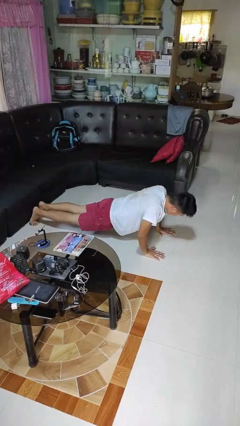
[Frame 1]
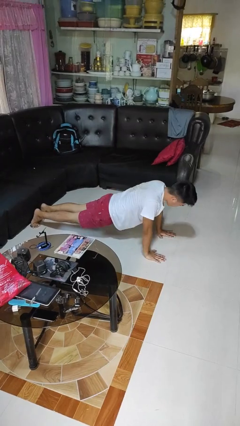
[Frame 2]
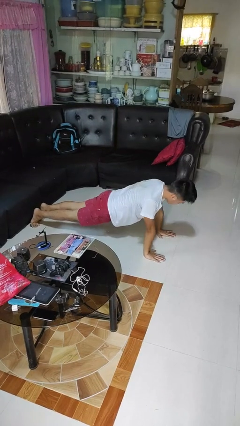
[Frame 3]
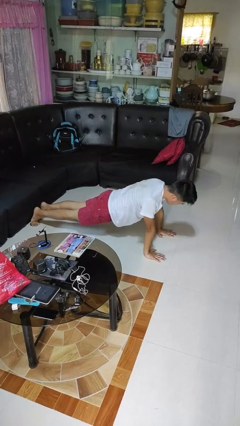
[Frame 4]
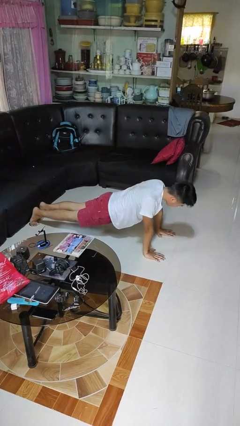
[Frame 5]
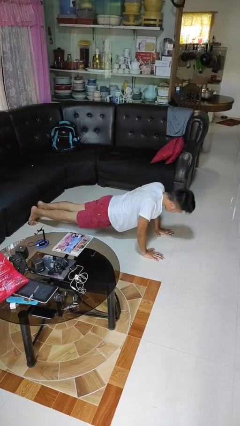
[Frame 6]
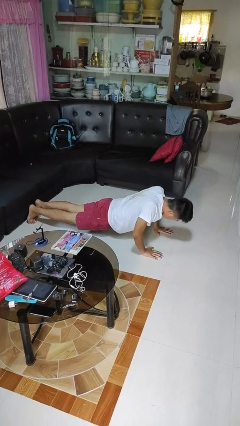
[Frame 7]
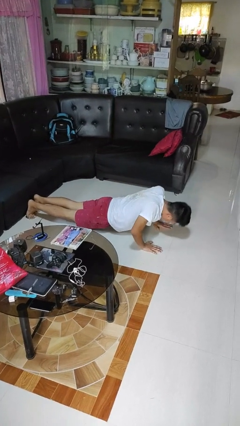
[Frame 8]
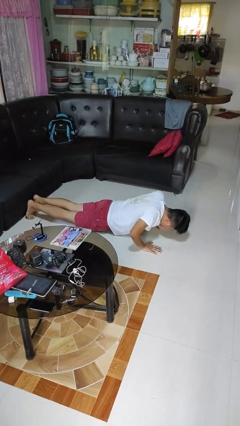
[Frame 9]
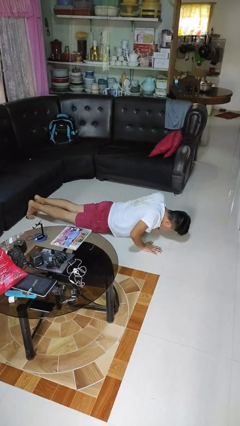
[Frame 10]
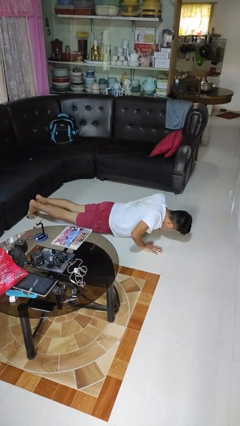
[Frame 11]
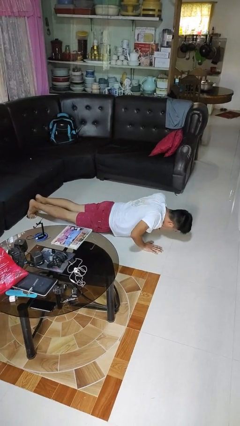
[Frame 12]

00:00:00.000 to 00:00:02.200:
person exercises with pushup

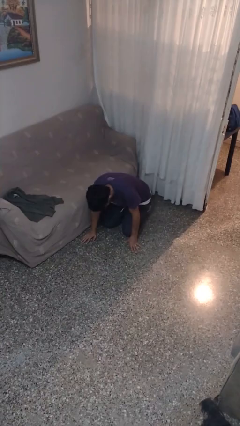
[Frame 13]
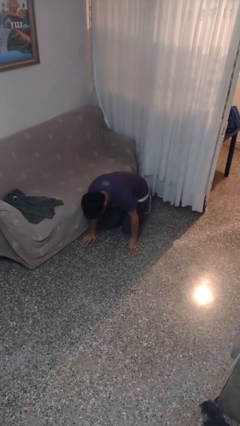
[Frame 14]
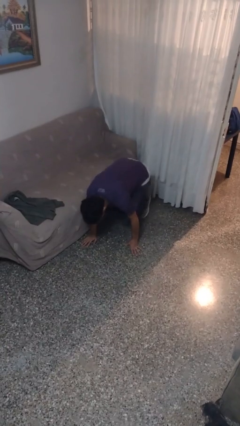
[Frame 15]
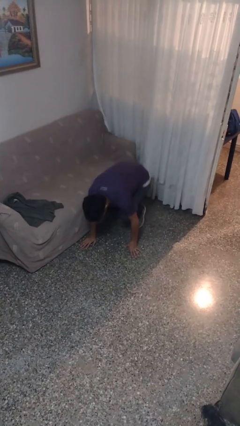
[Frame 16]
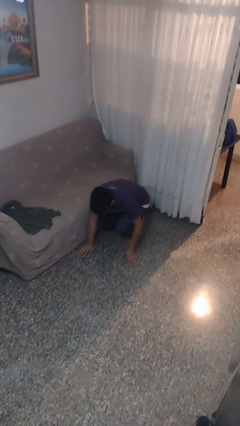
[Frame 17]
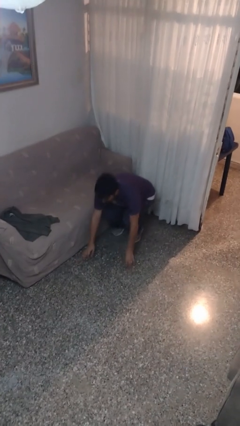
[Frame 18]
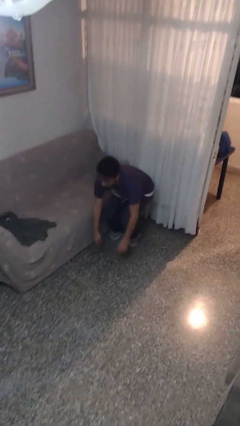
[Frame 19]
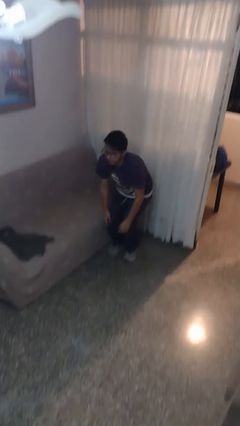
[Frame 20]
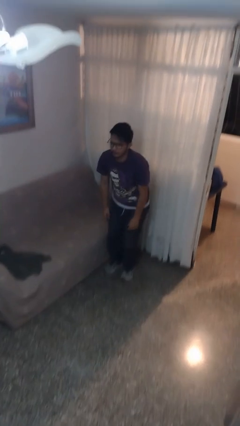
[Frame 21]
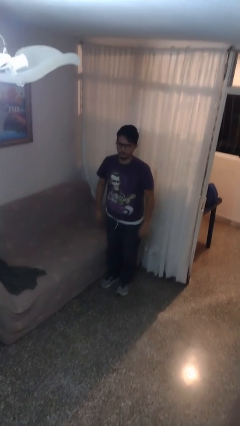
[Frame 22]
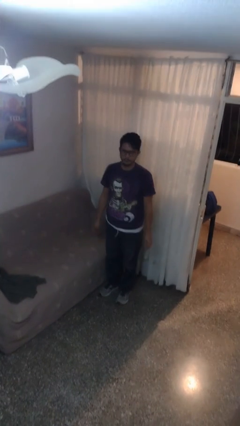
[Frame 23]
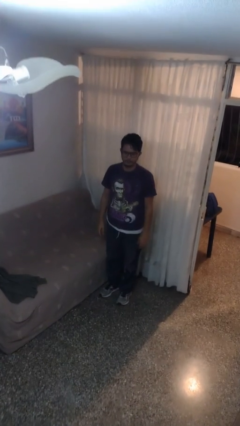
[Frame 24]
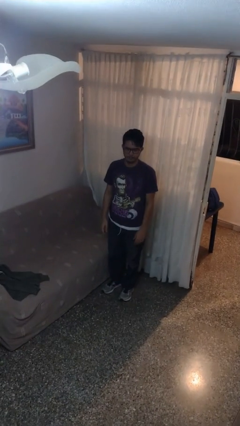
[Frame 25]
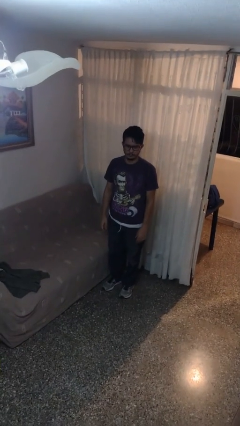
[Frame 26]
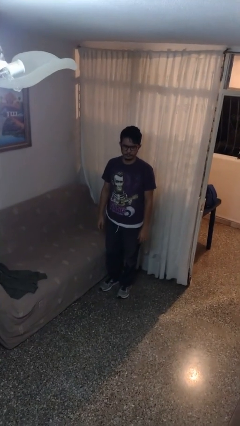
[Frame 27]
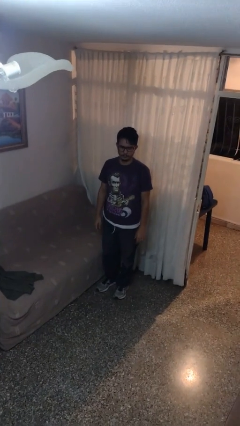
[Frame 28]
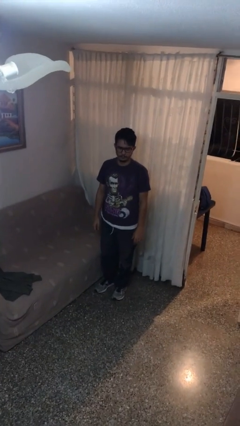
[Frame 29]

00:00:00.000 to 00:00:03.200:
person stands up from floor

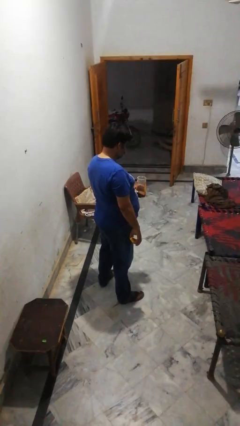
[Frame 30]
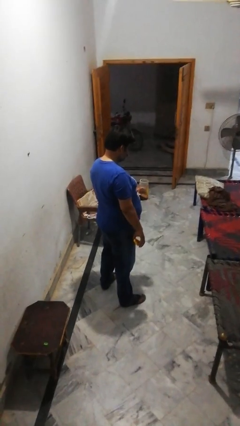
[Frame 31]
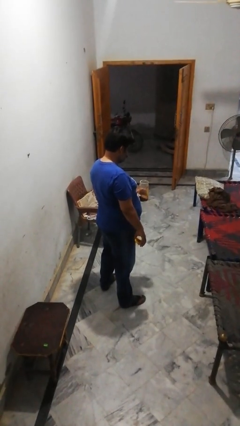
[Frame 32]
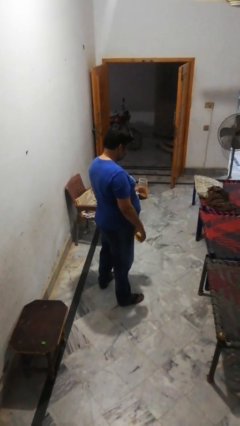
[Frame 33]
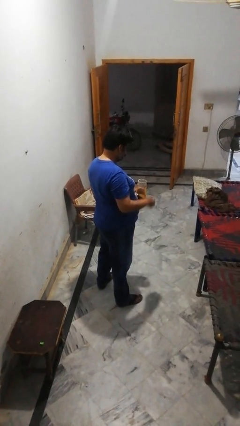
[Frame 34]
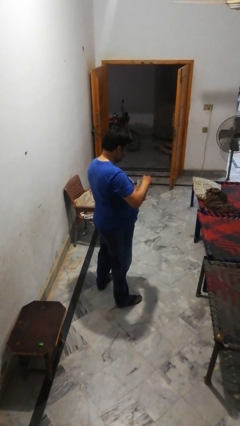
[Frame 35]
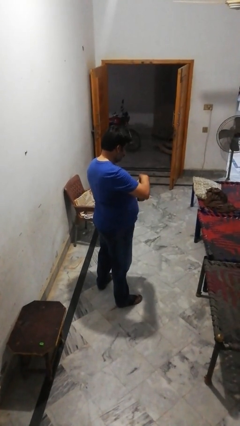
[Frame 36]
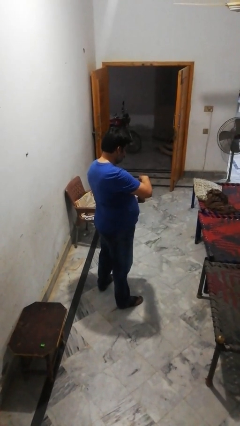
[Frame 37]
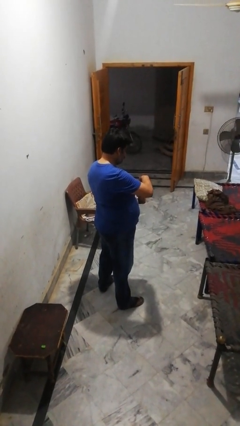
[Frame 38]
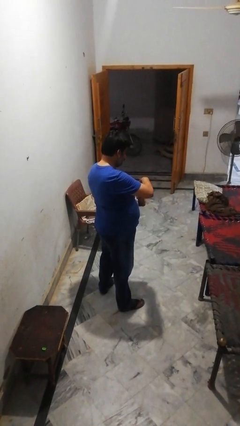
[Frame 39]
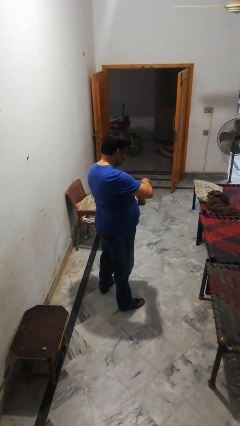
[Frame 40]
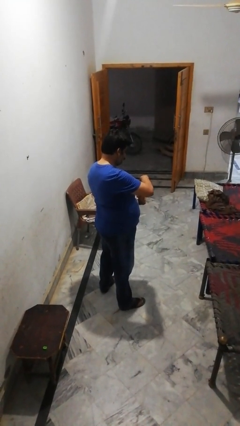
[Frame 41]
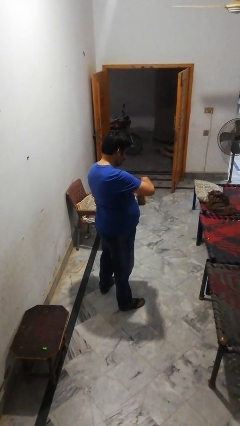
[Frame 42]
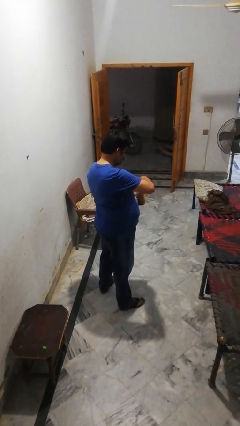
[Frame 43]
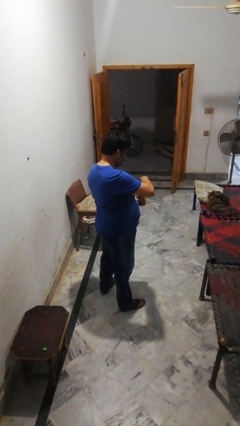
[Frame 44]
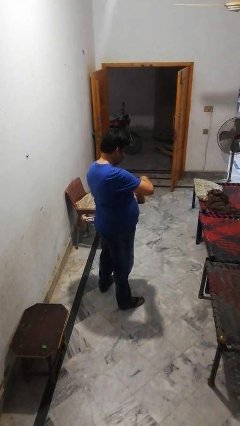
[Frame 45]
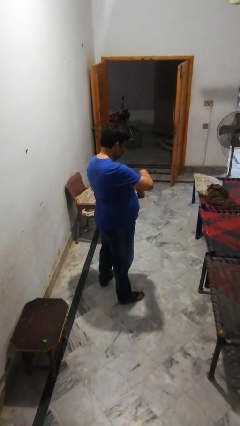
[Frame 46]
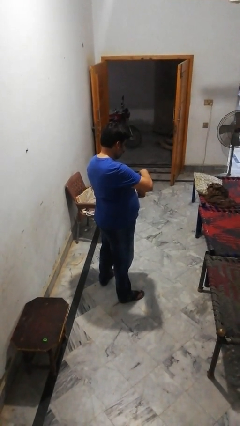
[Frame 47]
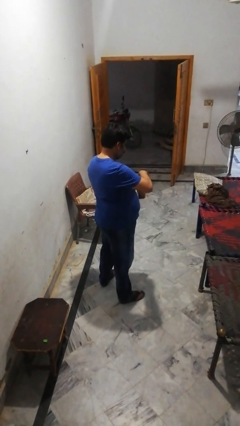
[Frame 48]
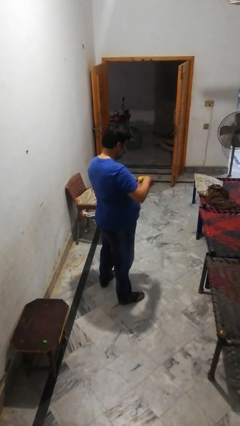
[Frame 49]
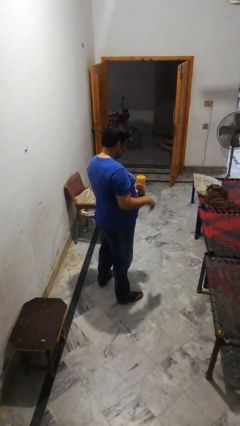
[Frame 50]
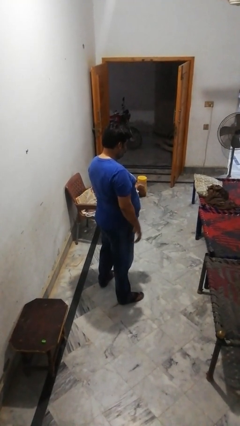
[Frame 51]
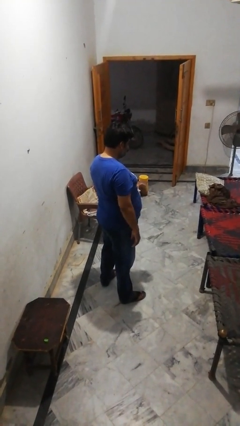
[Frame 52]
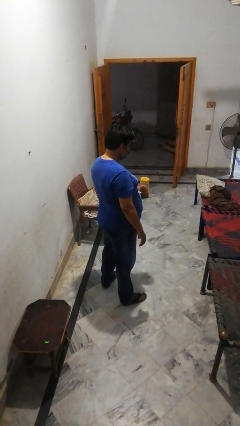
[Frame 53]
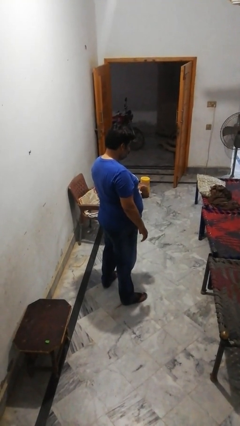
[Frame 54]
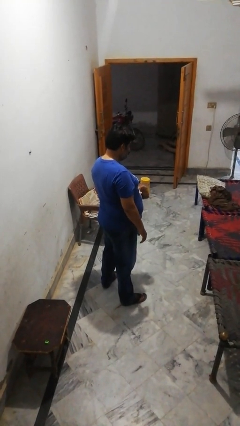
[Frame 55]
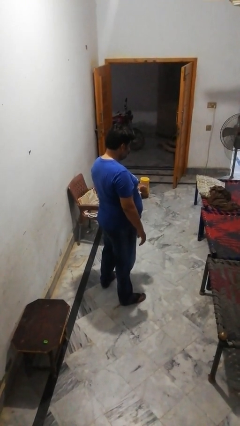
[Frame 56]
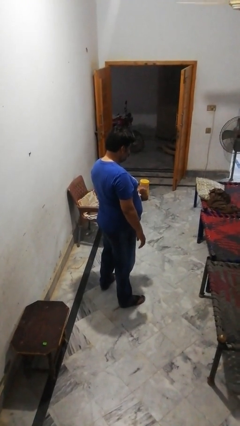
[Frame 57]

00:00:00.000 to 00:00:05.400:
person closes jar

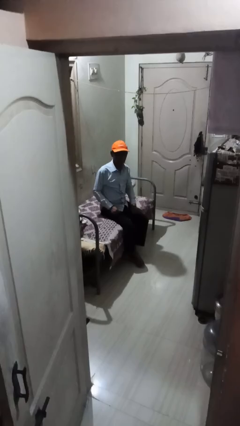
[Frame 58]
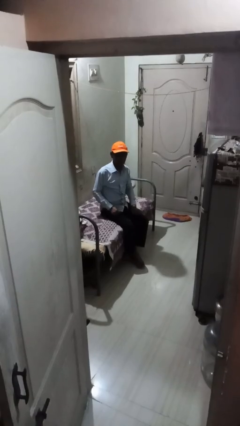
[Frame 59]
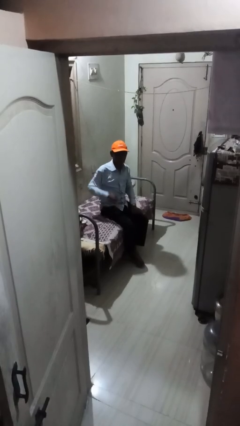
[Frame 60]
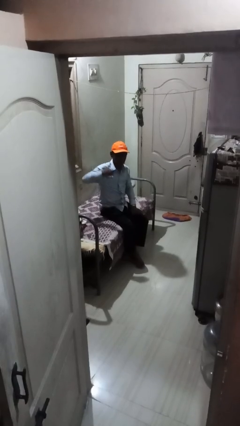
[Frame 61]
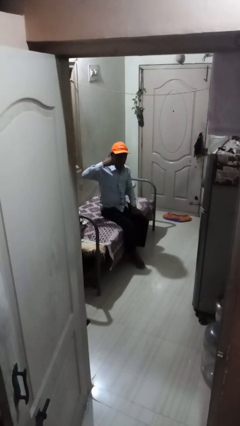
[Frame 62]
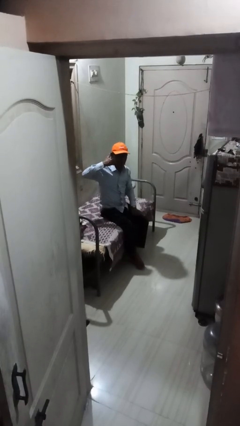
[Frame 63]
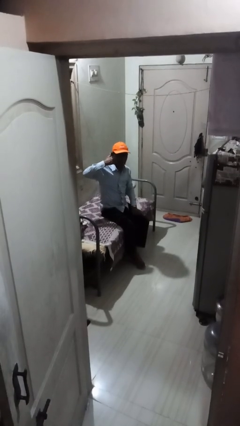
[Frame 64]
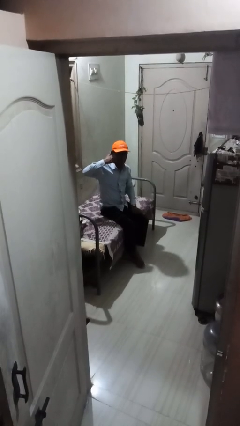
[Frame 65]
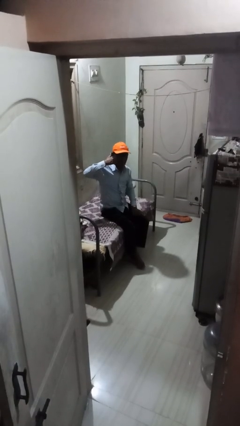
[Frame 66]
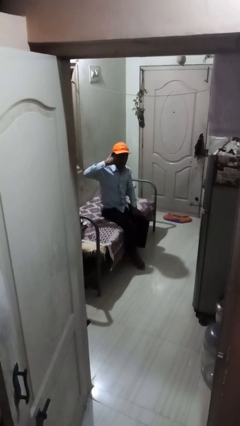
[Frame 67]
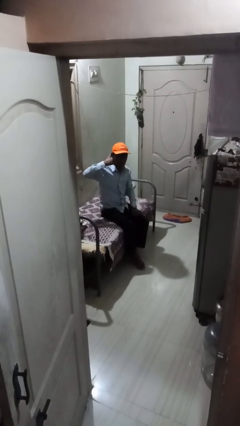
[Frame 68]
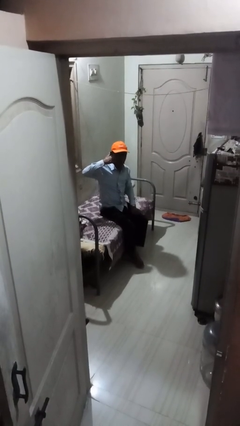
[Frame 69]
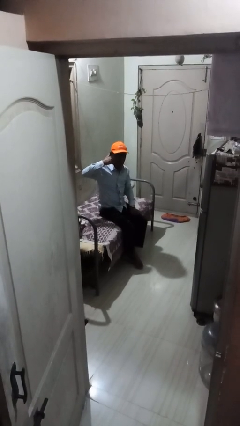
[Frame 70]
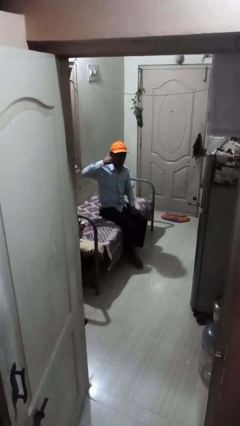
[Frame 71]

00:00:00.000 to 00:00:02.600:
person gestures call me

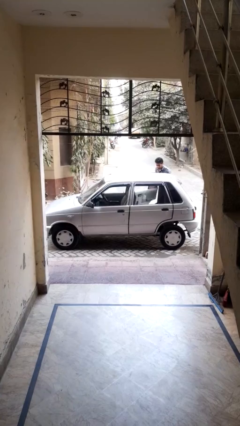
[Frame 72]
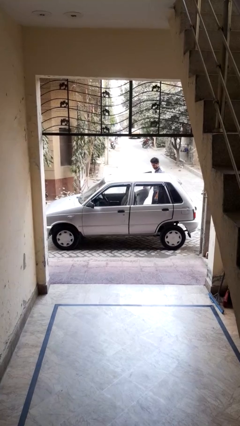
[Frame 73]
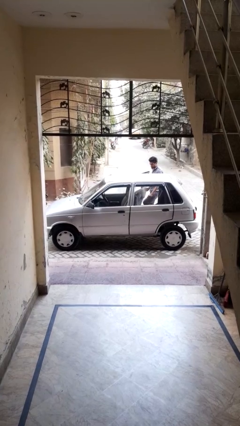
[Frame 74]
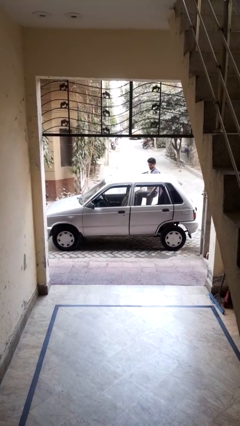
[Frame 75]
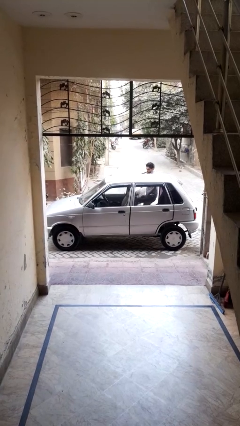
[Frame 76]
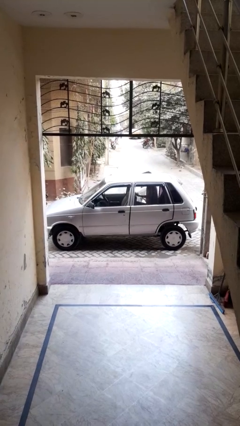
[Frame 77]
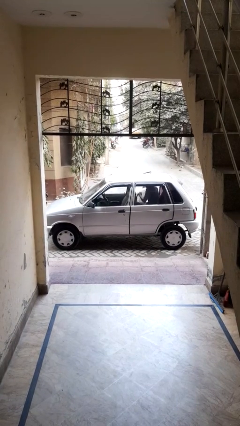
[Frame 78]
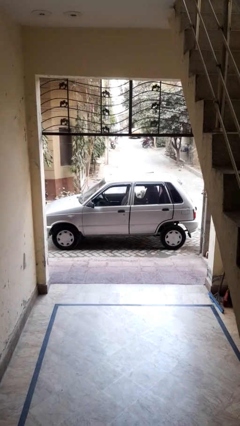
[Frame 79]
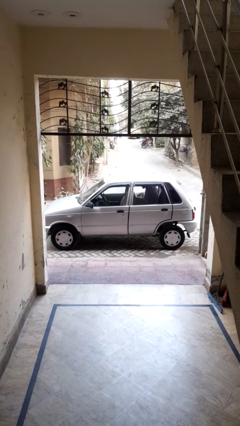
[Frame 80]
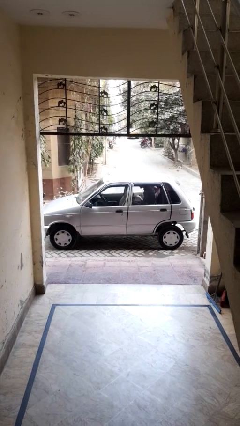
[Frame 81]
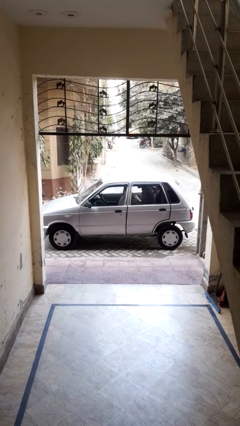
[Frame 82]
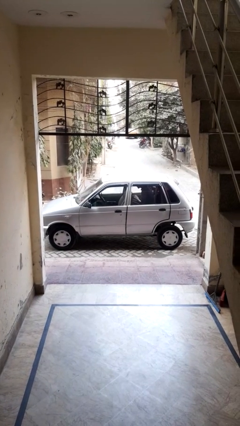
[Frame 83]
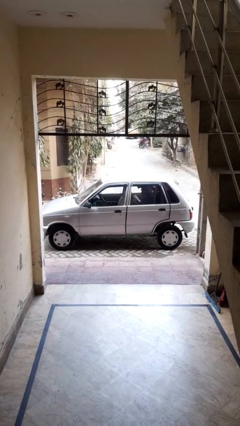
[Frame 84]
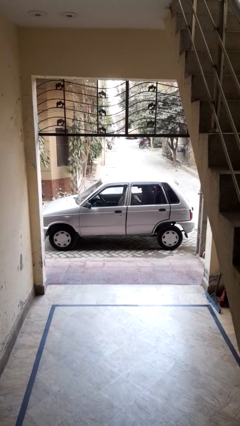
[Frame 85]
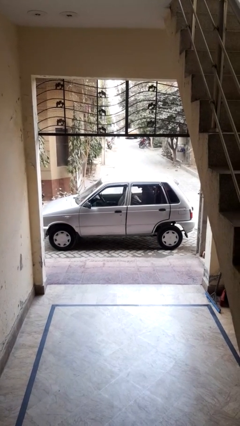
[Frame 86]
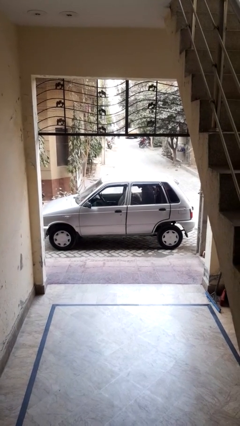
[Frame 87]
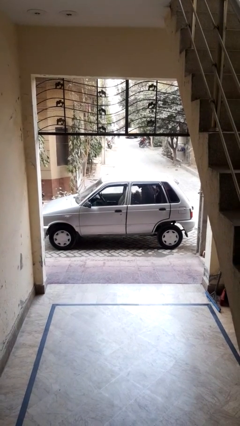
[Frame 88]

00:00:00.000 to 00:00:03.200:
car picks up person

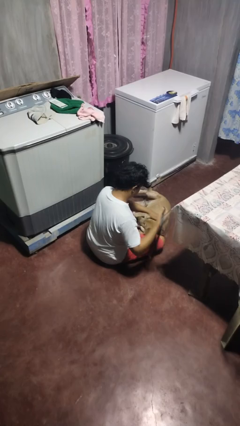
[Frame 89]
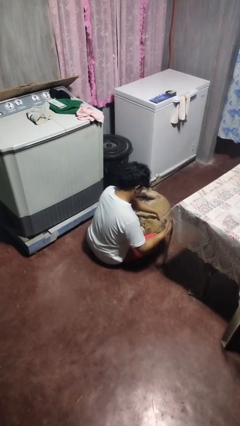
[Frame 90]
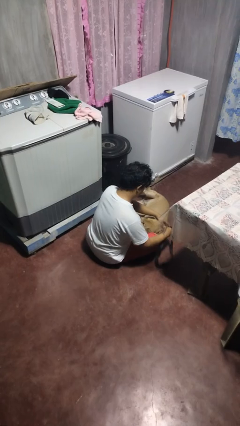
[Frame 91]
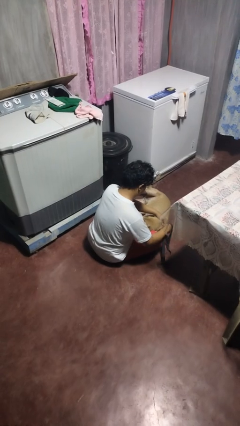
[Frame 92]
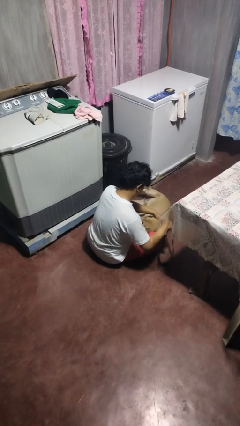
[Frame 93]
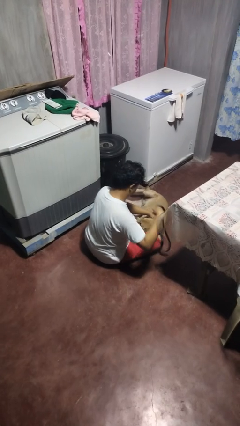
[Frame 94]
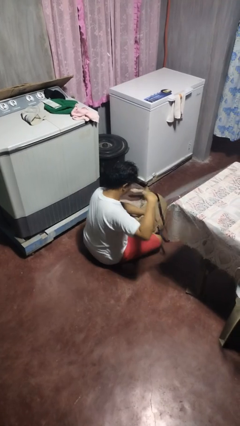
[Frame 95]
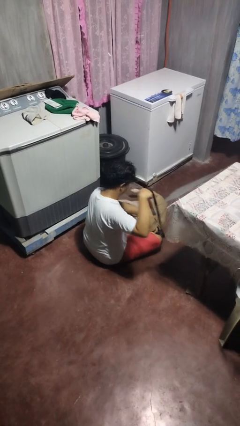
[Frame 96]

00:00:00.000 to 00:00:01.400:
person attaches leash to dog
